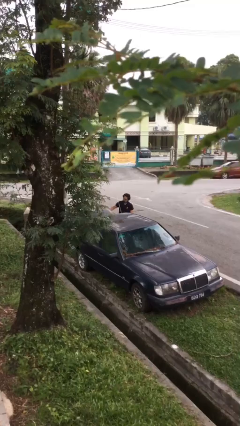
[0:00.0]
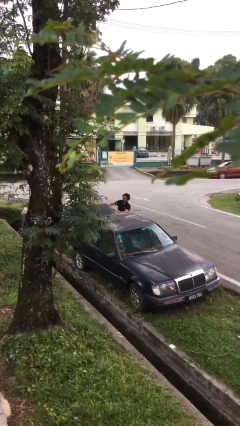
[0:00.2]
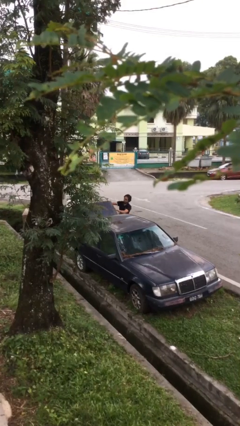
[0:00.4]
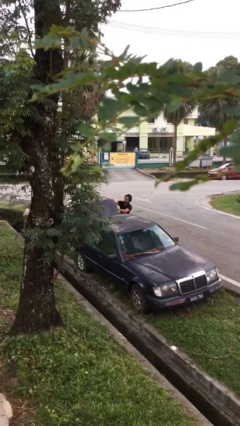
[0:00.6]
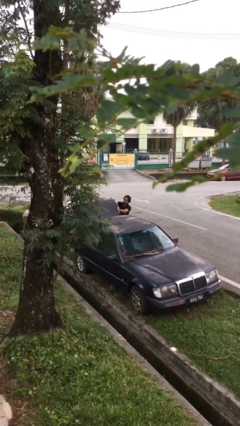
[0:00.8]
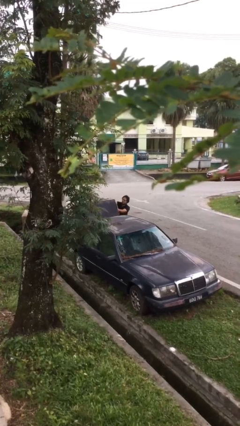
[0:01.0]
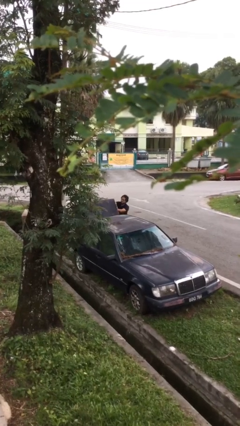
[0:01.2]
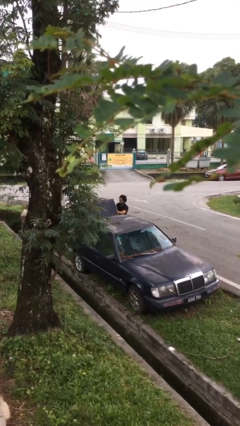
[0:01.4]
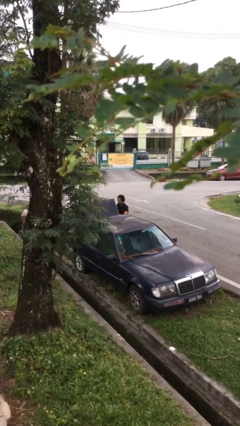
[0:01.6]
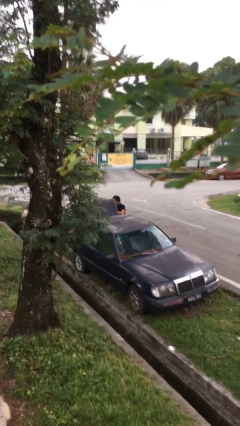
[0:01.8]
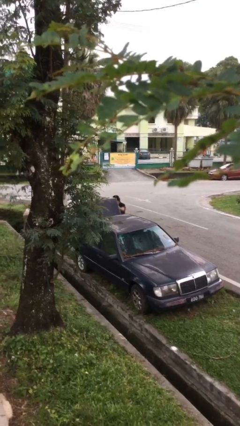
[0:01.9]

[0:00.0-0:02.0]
person opens car trunk

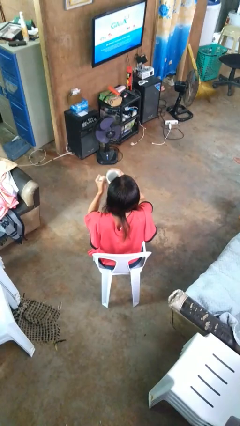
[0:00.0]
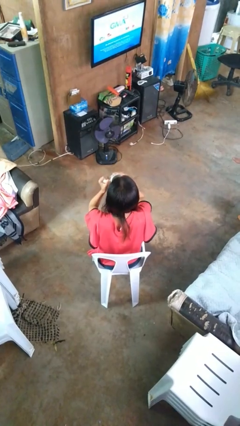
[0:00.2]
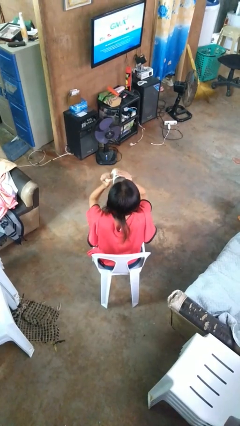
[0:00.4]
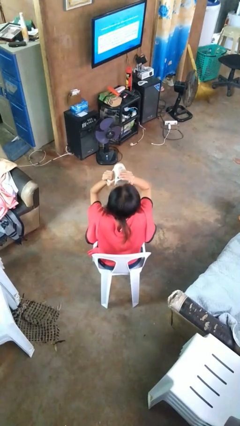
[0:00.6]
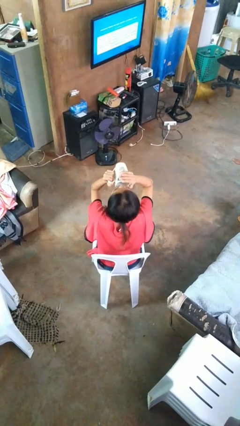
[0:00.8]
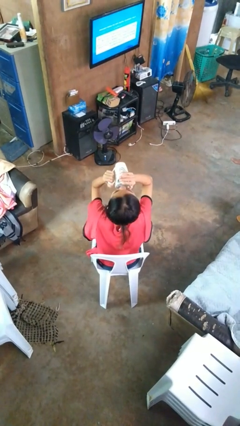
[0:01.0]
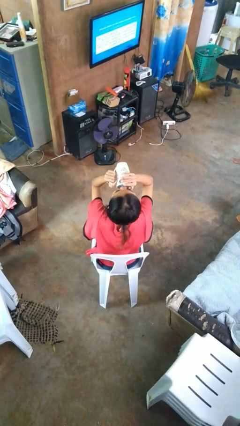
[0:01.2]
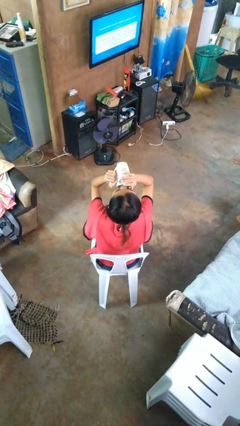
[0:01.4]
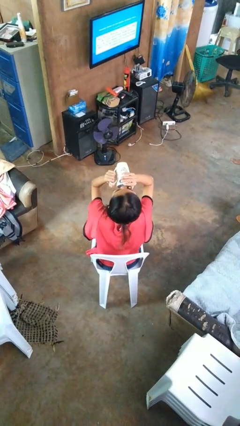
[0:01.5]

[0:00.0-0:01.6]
person drinks from mug

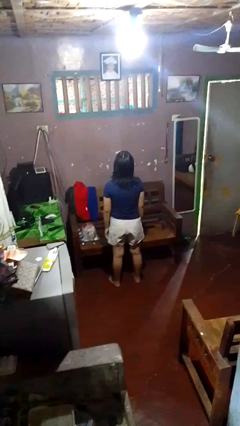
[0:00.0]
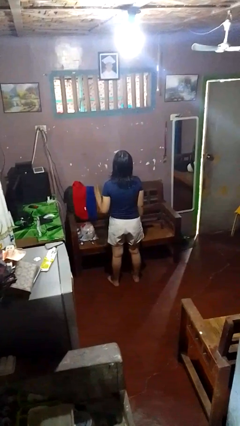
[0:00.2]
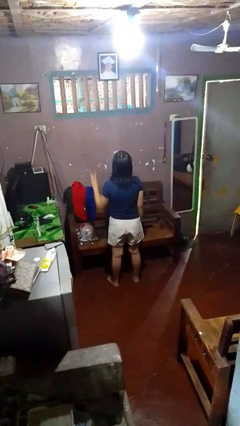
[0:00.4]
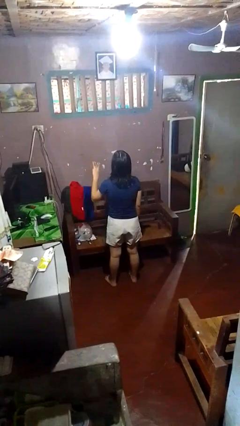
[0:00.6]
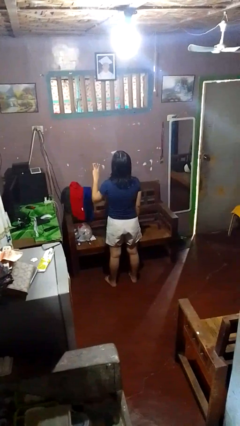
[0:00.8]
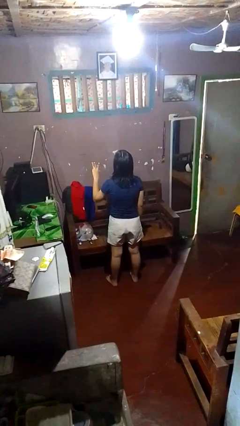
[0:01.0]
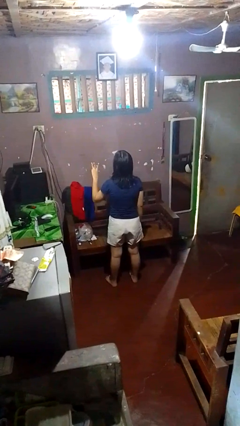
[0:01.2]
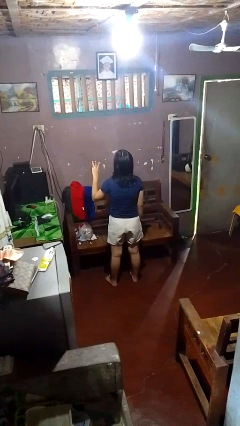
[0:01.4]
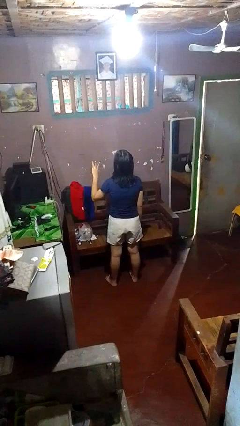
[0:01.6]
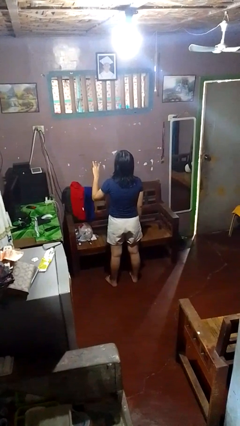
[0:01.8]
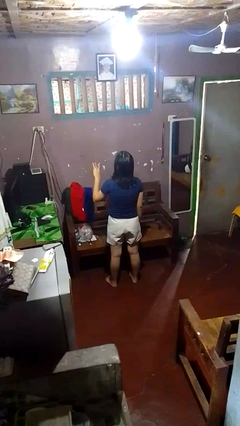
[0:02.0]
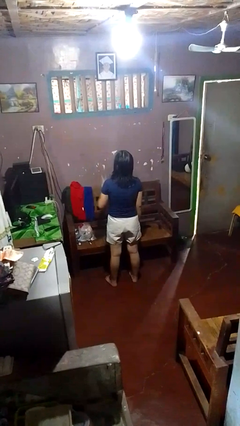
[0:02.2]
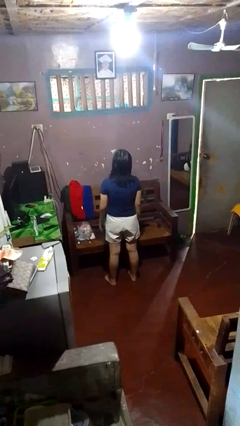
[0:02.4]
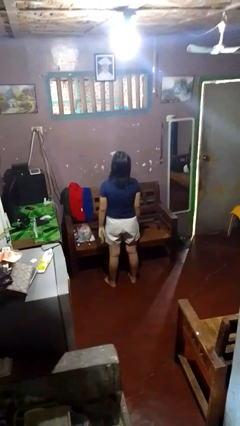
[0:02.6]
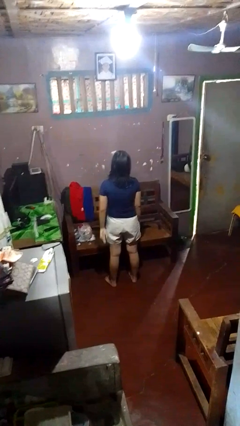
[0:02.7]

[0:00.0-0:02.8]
person gestures number three

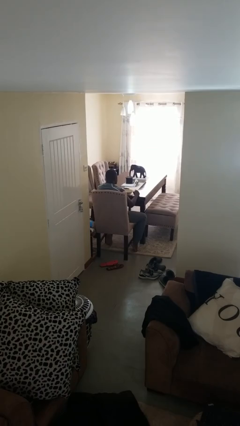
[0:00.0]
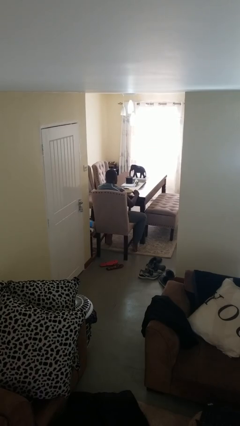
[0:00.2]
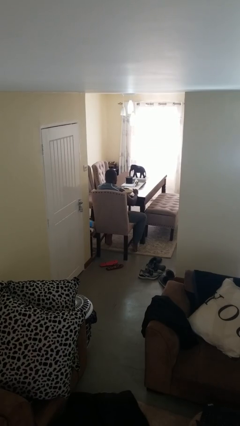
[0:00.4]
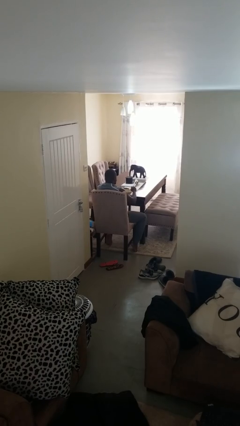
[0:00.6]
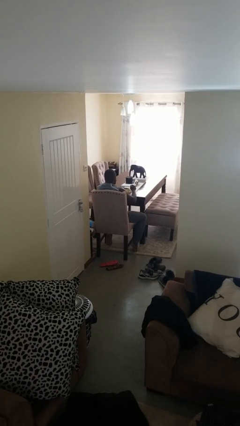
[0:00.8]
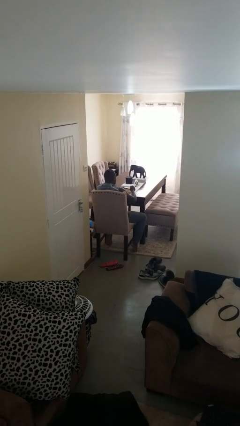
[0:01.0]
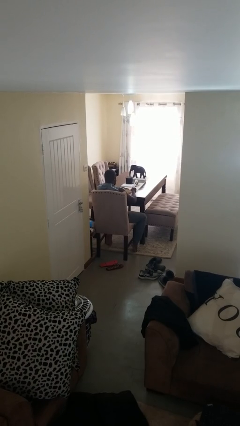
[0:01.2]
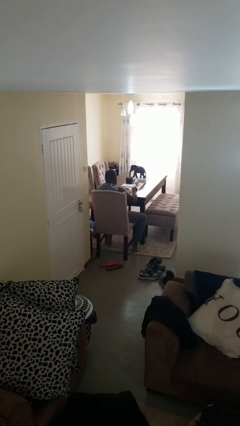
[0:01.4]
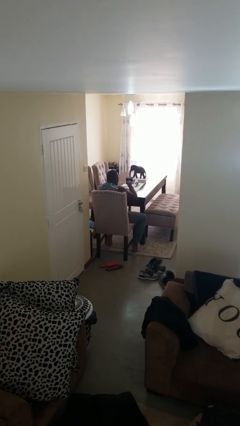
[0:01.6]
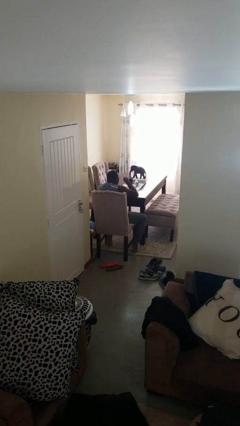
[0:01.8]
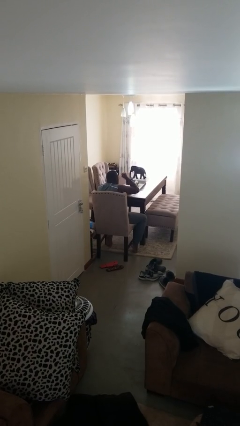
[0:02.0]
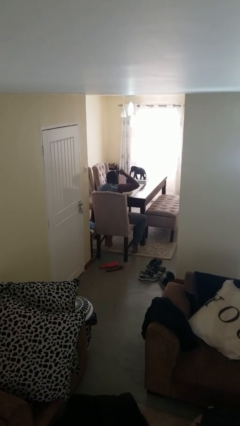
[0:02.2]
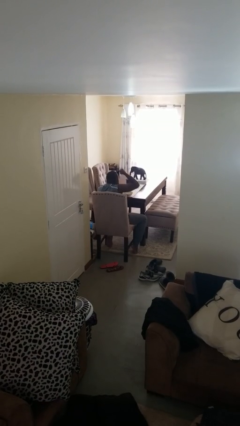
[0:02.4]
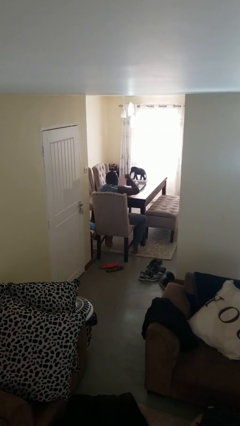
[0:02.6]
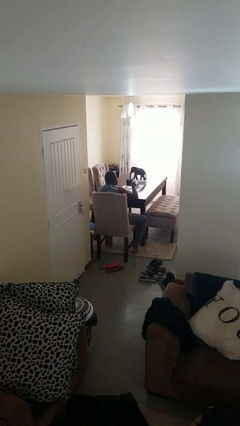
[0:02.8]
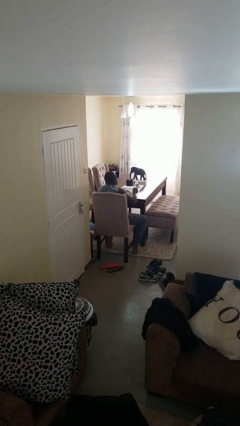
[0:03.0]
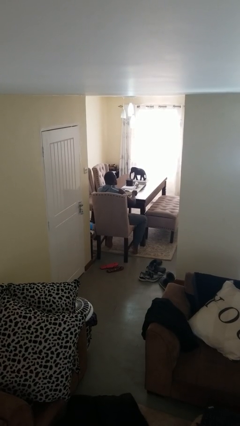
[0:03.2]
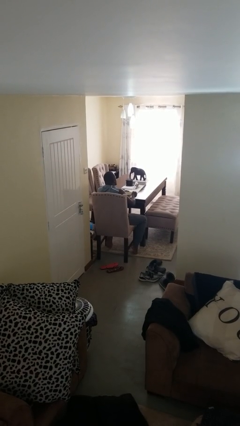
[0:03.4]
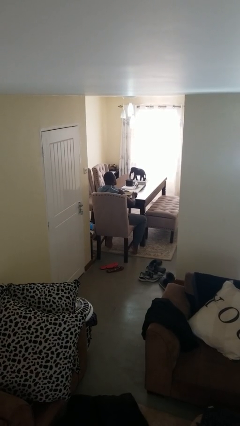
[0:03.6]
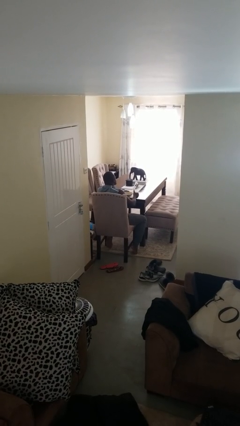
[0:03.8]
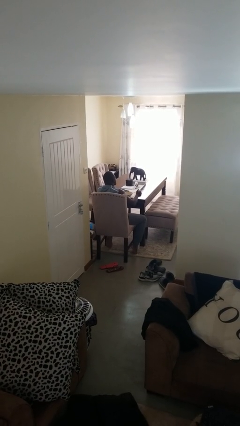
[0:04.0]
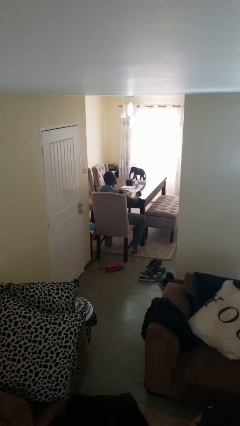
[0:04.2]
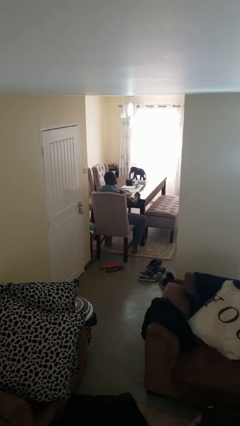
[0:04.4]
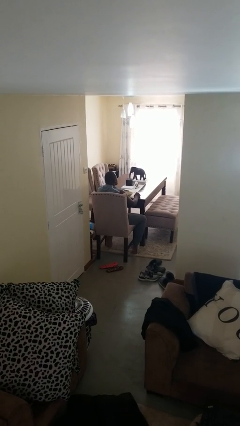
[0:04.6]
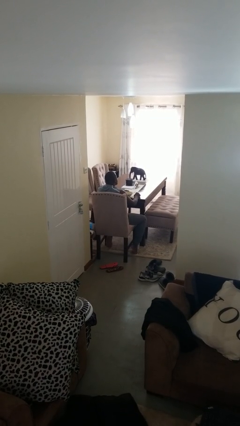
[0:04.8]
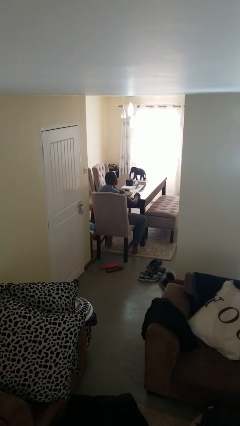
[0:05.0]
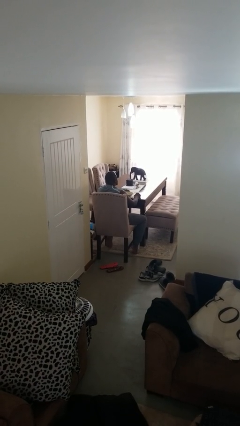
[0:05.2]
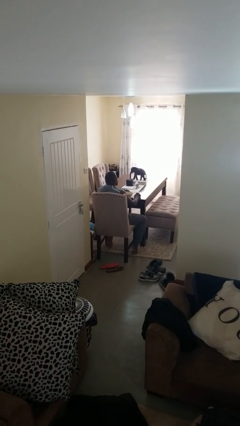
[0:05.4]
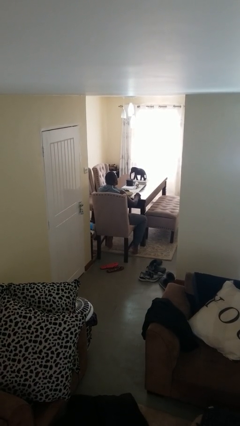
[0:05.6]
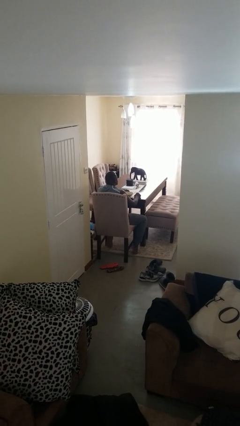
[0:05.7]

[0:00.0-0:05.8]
person eats with utensil

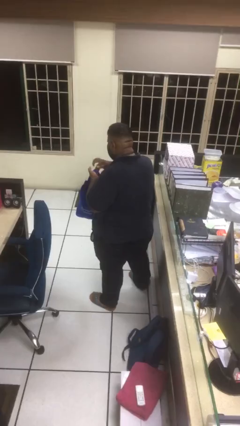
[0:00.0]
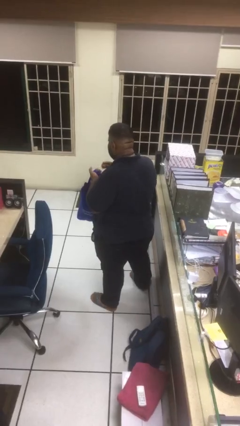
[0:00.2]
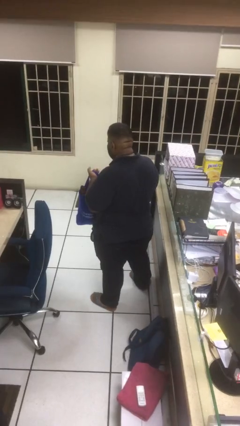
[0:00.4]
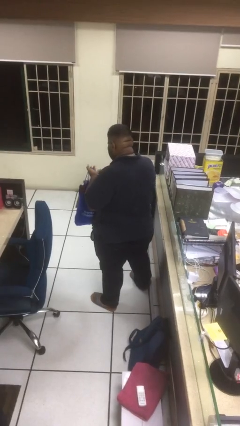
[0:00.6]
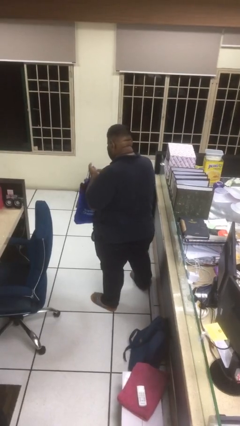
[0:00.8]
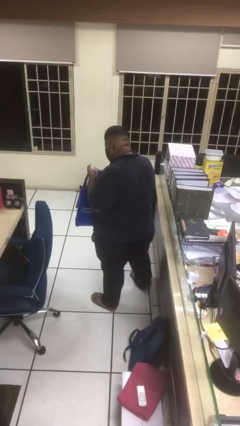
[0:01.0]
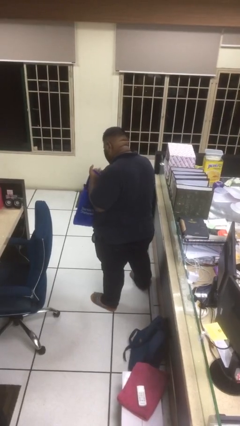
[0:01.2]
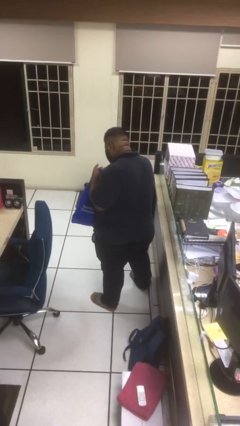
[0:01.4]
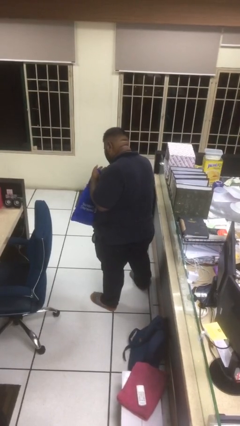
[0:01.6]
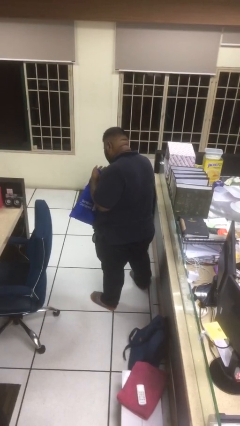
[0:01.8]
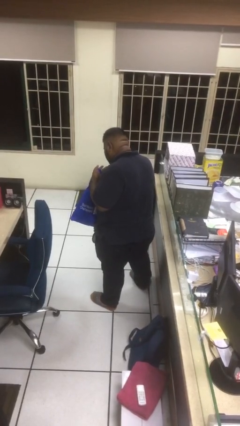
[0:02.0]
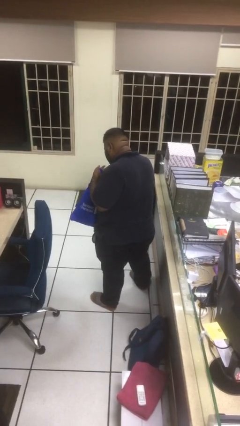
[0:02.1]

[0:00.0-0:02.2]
person searches in bag

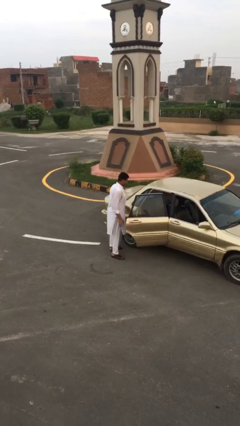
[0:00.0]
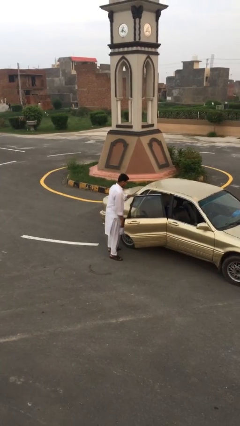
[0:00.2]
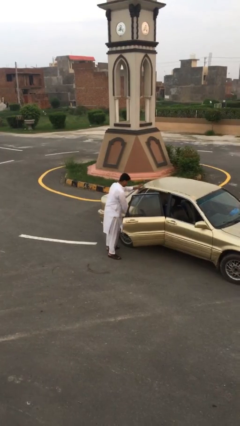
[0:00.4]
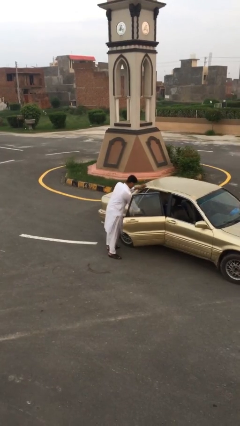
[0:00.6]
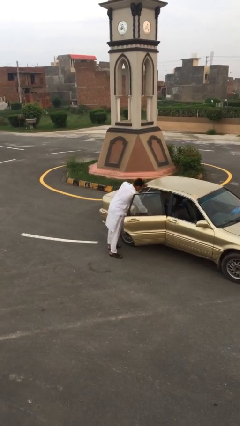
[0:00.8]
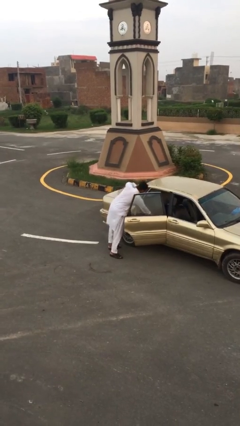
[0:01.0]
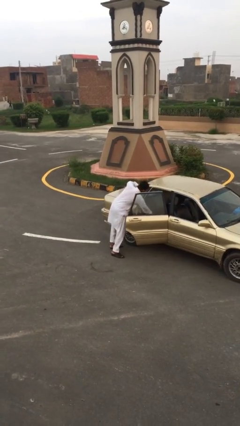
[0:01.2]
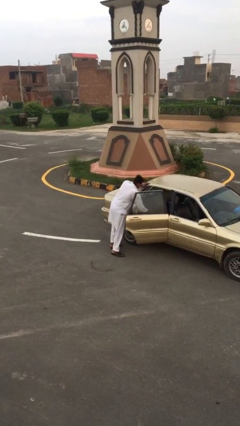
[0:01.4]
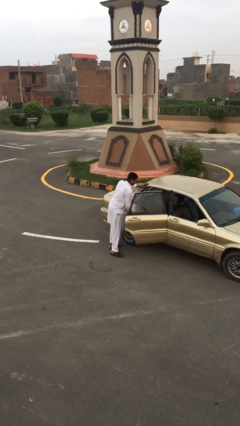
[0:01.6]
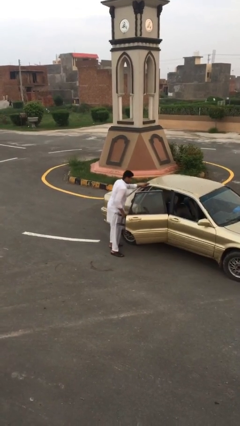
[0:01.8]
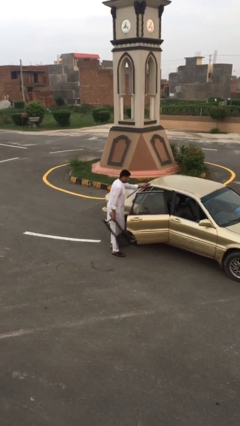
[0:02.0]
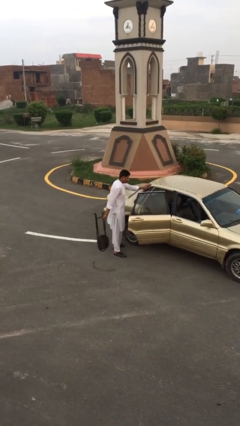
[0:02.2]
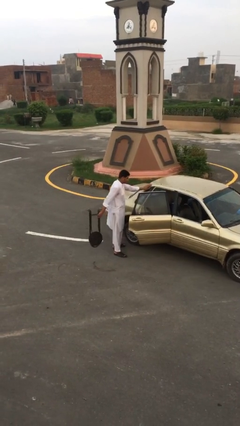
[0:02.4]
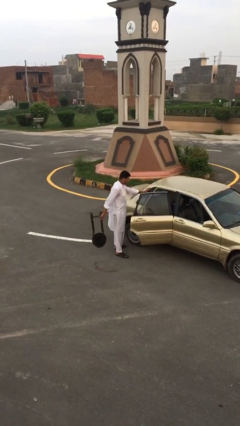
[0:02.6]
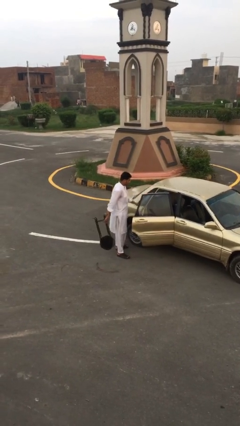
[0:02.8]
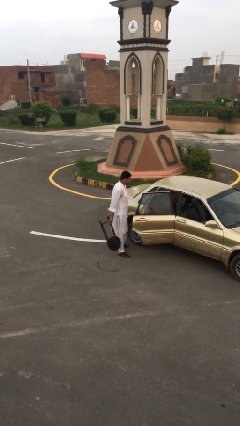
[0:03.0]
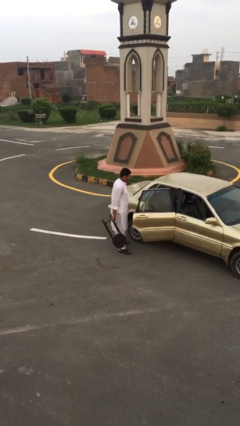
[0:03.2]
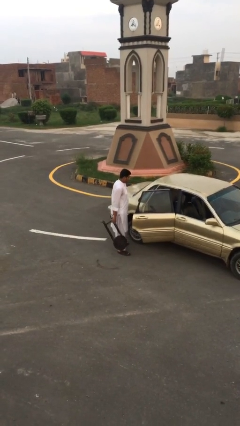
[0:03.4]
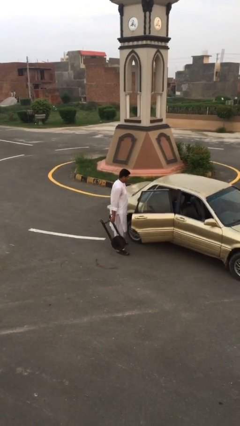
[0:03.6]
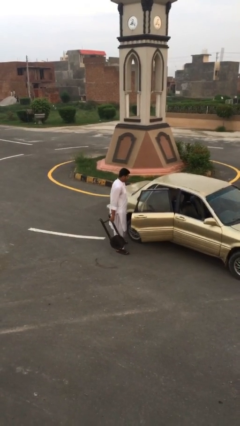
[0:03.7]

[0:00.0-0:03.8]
person unloads car
